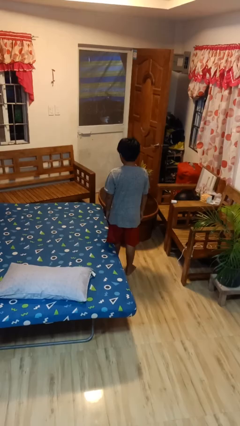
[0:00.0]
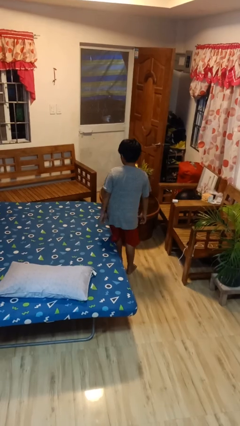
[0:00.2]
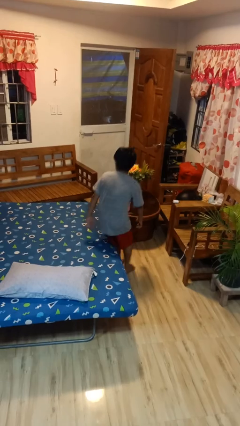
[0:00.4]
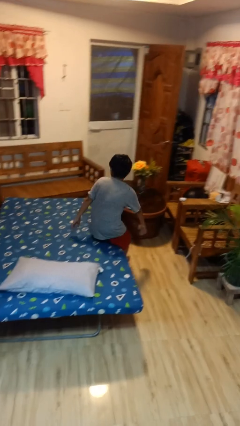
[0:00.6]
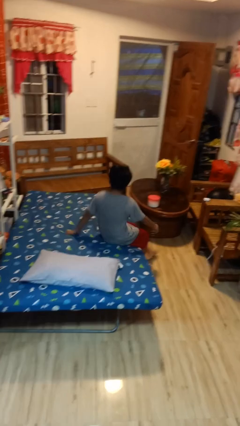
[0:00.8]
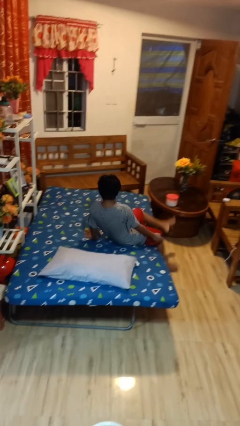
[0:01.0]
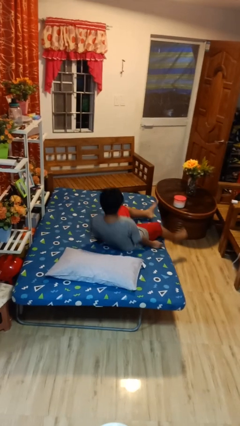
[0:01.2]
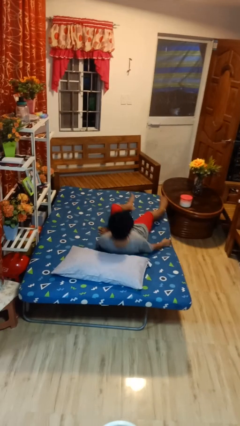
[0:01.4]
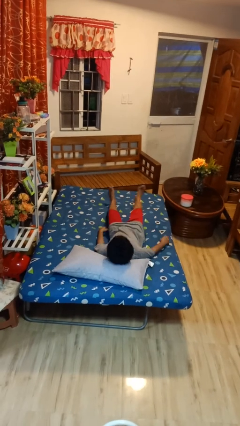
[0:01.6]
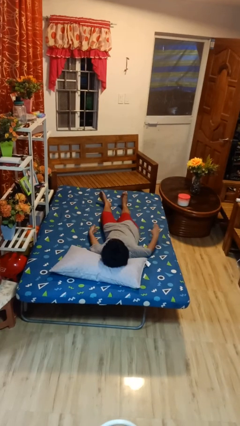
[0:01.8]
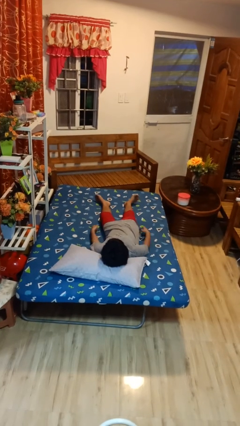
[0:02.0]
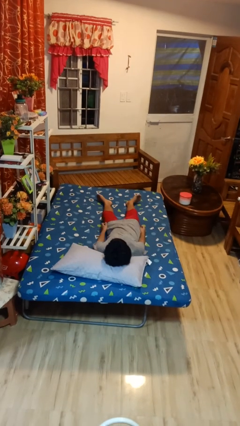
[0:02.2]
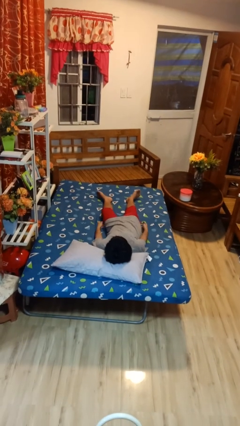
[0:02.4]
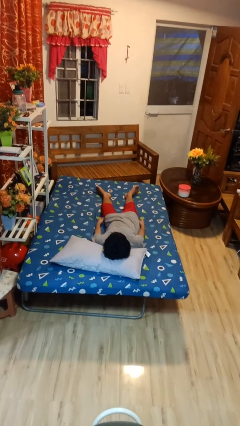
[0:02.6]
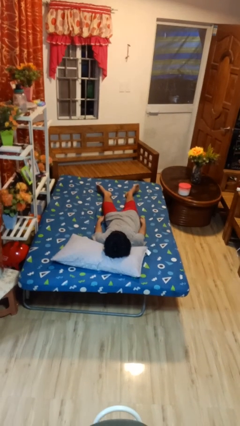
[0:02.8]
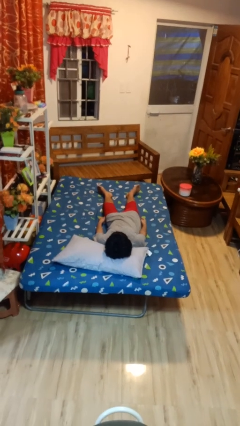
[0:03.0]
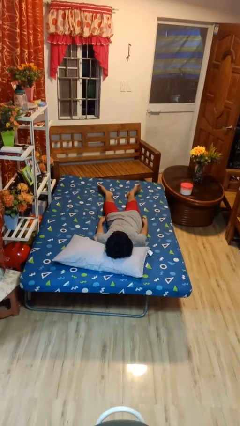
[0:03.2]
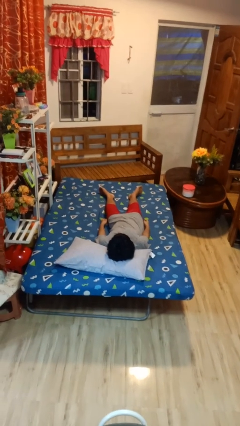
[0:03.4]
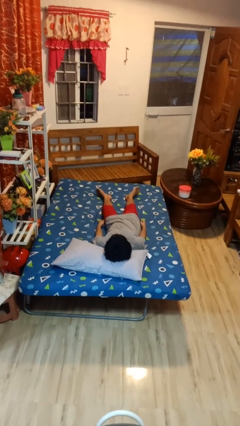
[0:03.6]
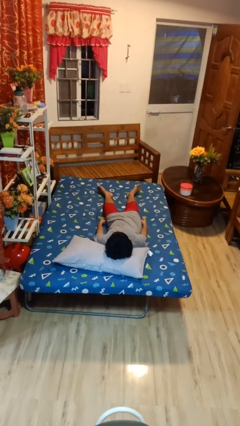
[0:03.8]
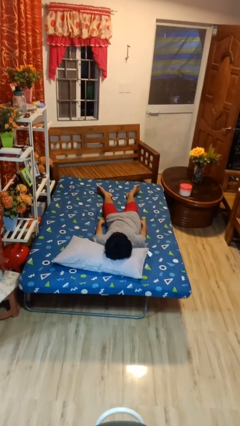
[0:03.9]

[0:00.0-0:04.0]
person lies down on bed

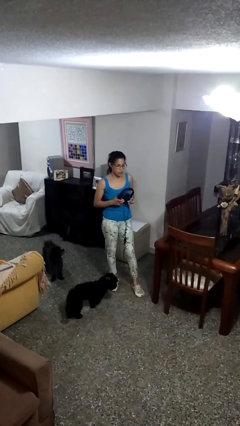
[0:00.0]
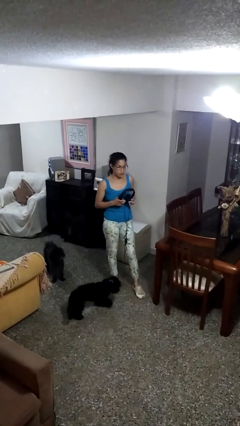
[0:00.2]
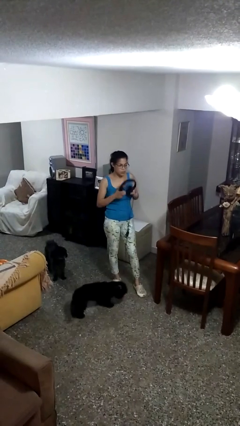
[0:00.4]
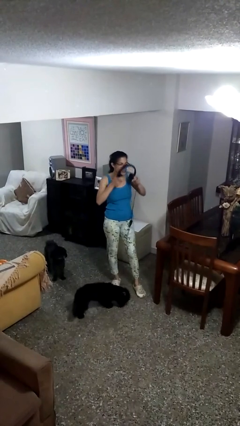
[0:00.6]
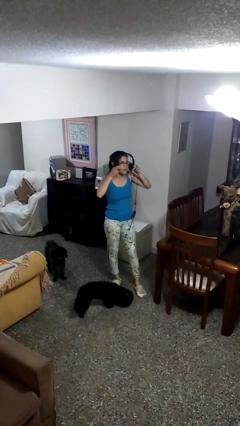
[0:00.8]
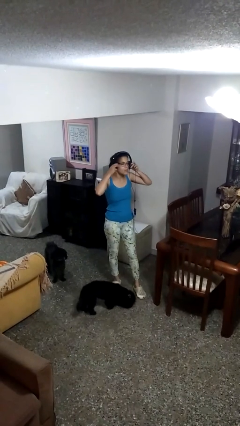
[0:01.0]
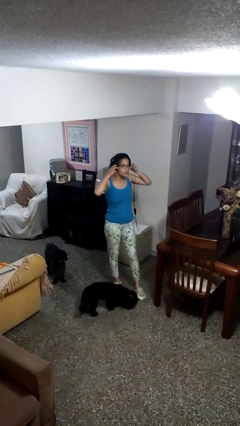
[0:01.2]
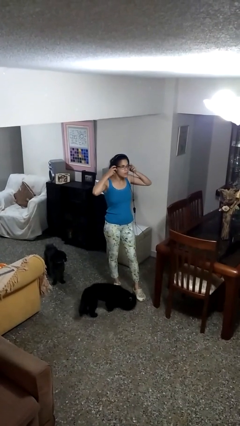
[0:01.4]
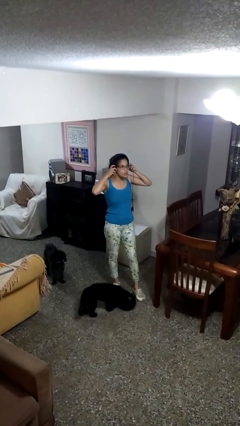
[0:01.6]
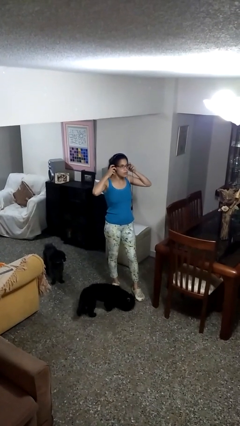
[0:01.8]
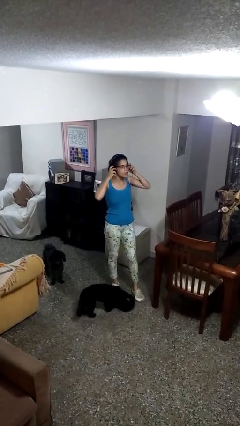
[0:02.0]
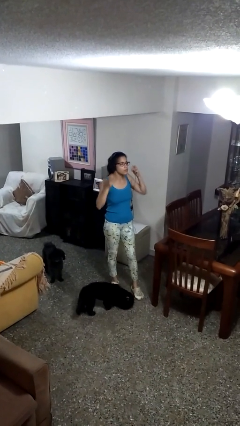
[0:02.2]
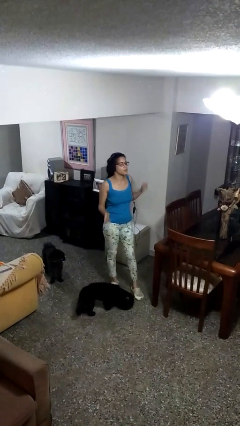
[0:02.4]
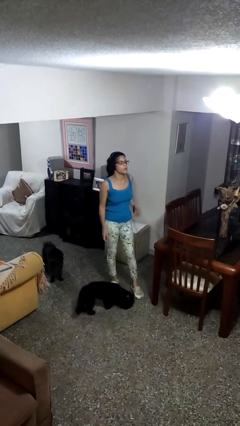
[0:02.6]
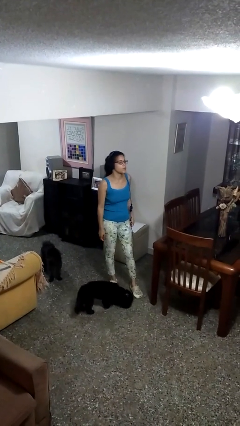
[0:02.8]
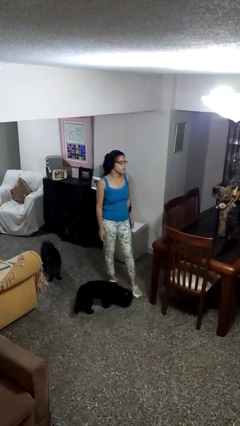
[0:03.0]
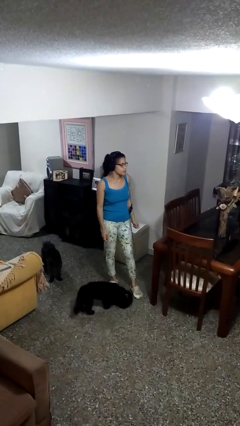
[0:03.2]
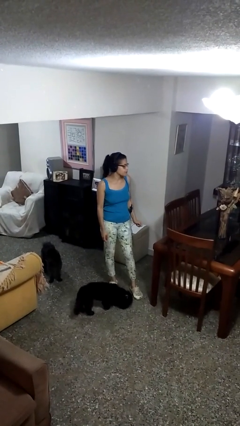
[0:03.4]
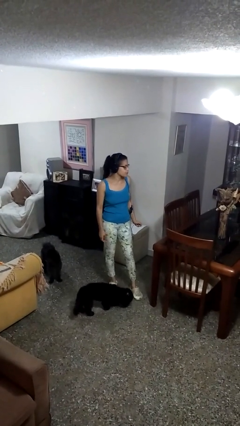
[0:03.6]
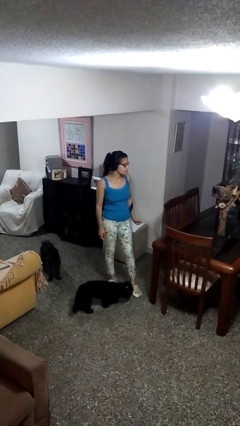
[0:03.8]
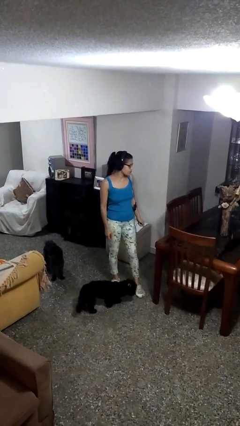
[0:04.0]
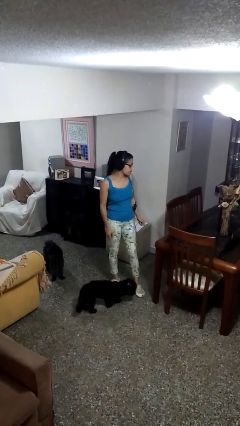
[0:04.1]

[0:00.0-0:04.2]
person puts on headphones

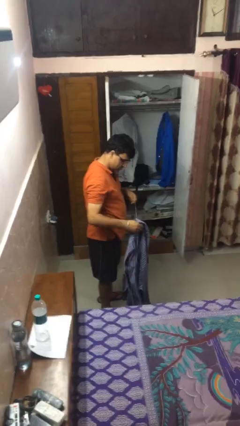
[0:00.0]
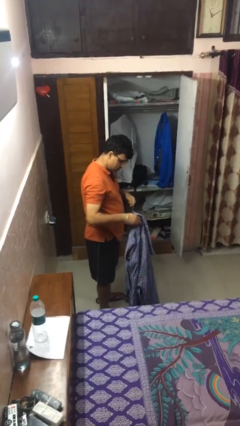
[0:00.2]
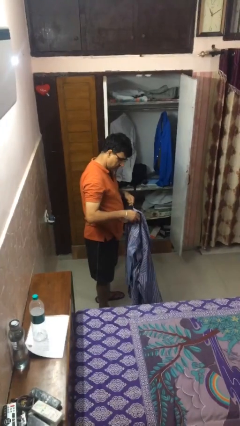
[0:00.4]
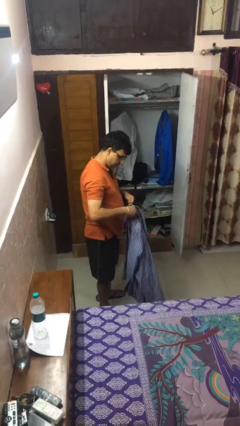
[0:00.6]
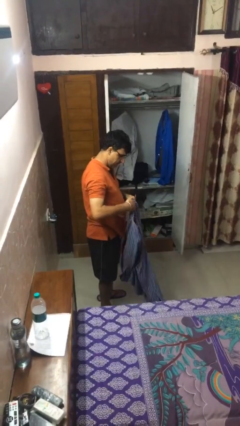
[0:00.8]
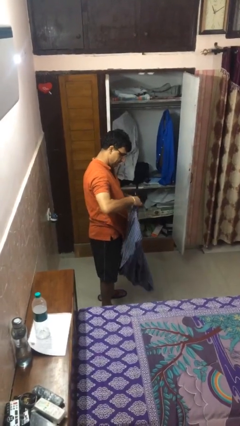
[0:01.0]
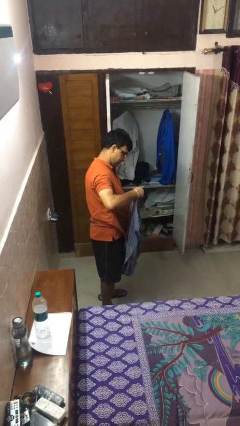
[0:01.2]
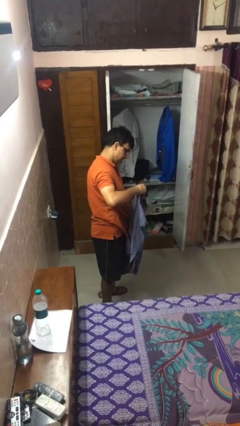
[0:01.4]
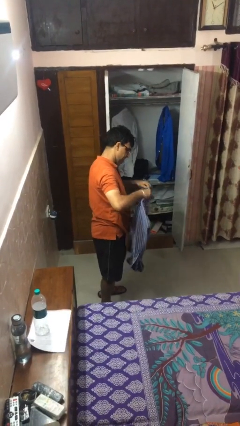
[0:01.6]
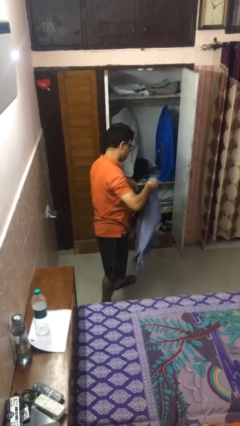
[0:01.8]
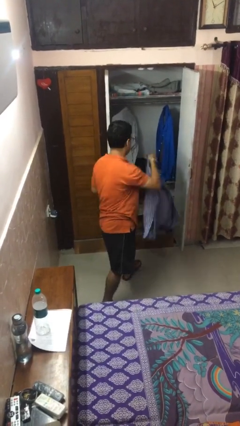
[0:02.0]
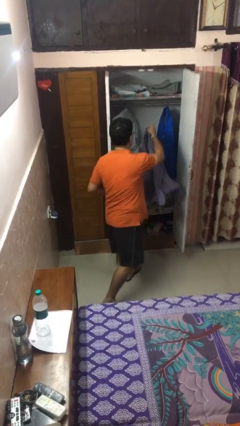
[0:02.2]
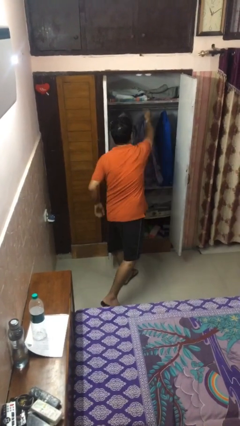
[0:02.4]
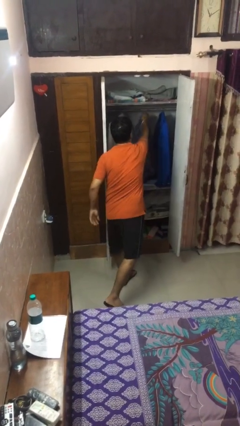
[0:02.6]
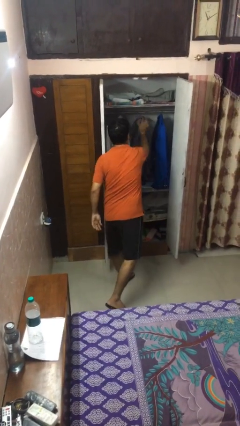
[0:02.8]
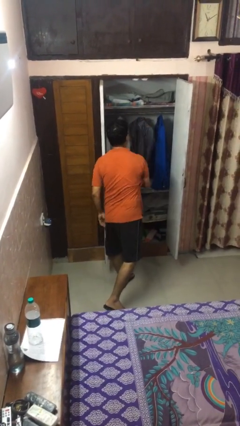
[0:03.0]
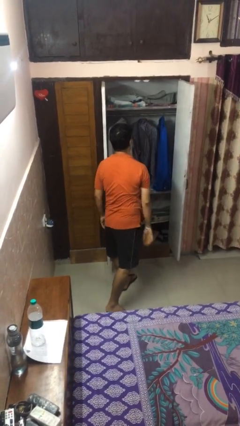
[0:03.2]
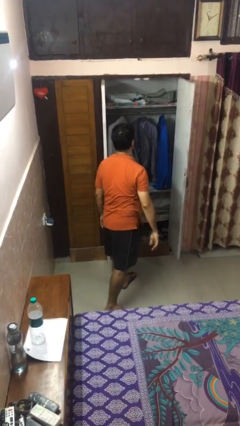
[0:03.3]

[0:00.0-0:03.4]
person puts clothes into closet

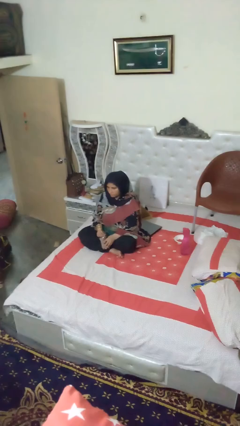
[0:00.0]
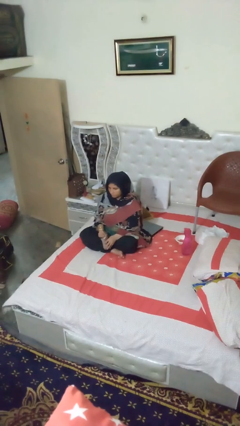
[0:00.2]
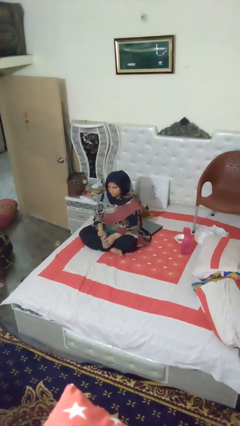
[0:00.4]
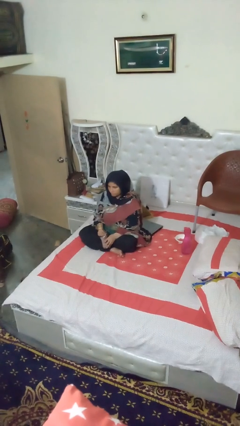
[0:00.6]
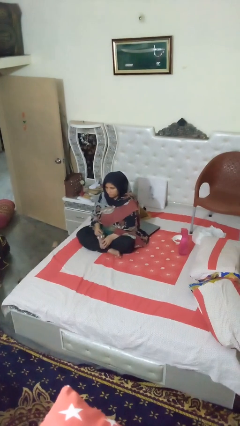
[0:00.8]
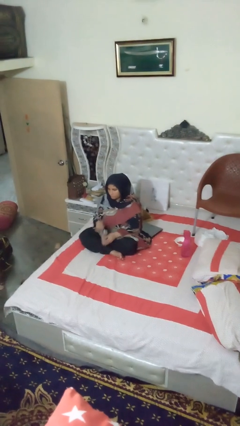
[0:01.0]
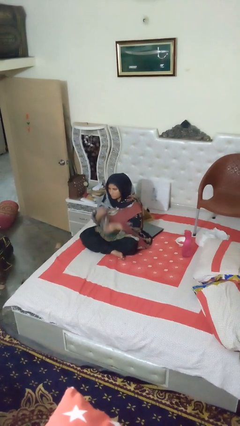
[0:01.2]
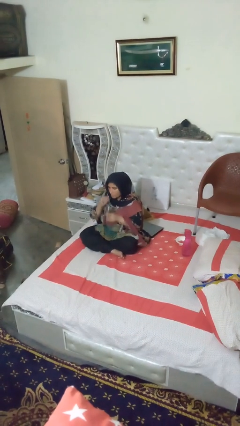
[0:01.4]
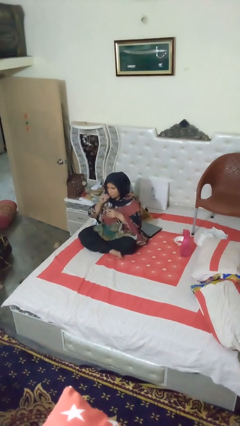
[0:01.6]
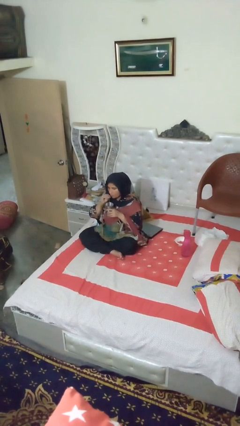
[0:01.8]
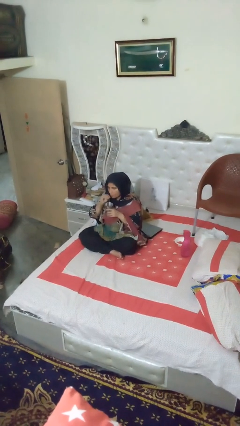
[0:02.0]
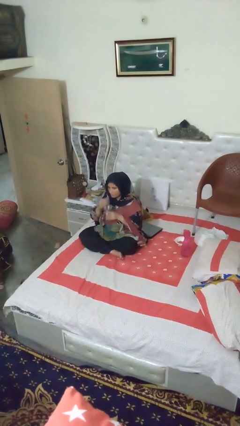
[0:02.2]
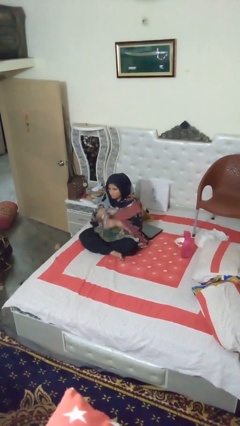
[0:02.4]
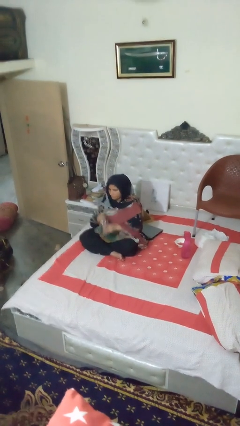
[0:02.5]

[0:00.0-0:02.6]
person drinks from straw

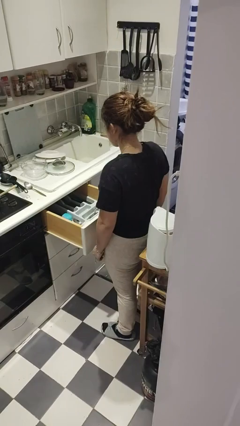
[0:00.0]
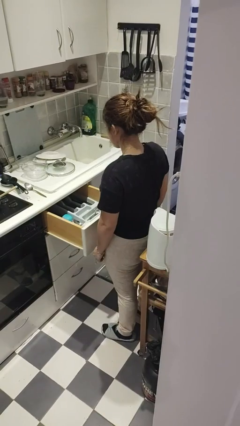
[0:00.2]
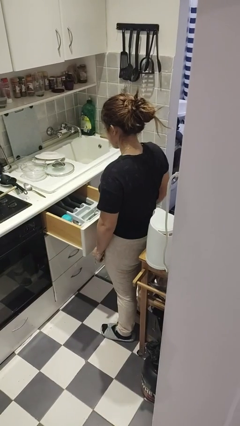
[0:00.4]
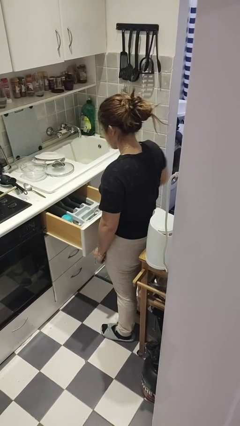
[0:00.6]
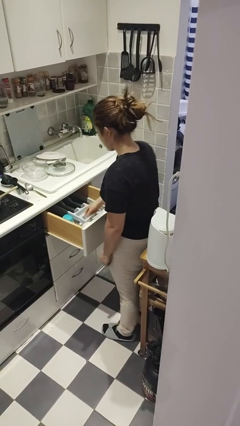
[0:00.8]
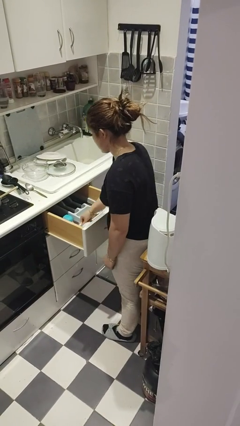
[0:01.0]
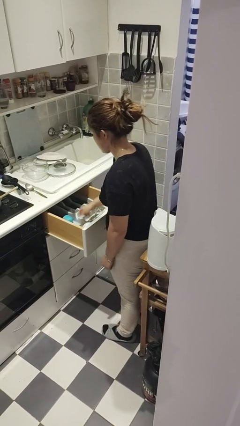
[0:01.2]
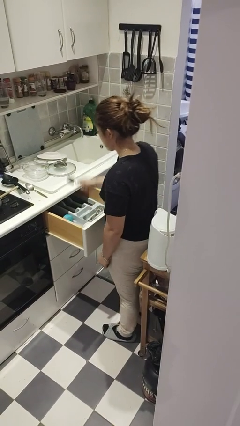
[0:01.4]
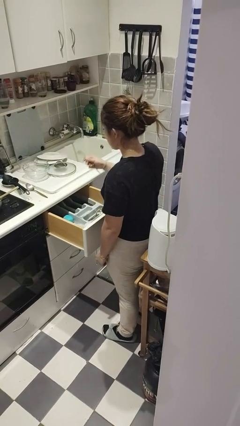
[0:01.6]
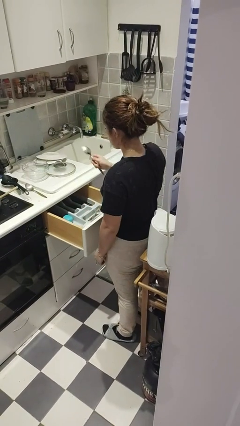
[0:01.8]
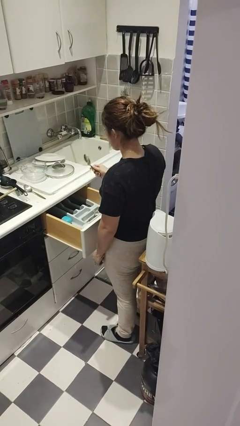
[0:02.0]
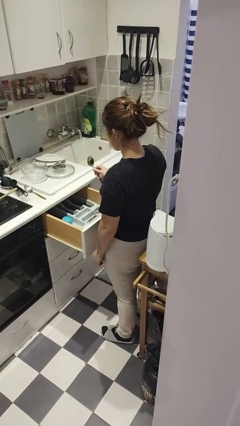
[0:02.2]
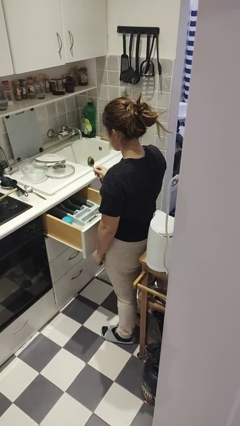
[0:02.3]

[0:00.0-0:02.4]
person takes object from kitchen drawer

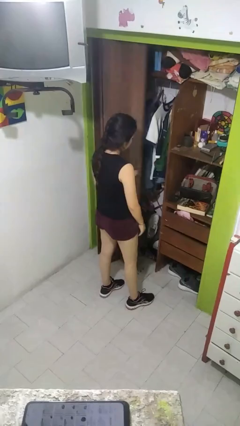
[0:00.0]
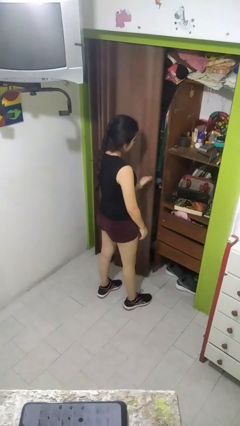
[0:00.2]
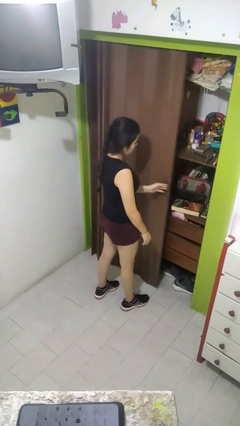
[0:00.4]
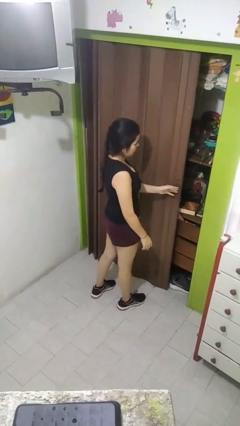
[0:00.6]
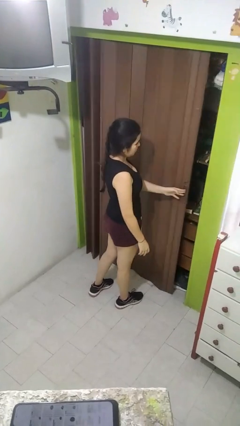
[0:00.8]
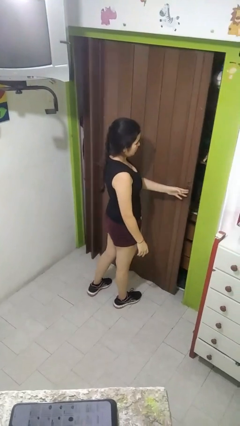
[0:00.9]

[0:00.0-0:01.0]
person closes closet door
